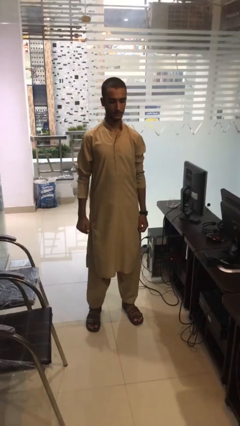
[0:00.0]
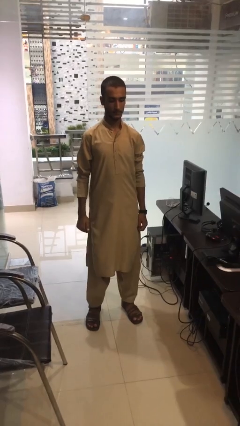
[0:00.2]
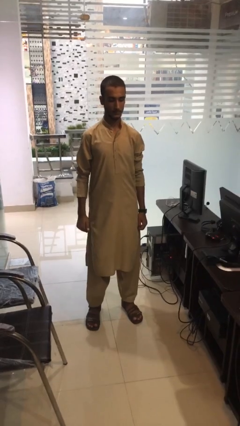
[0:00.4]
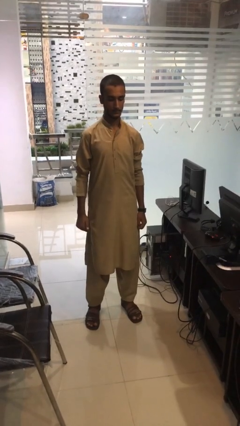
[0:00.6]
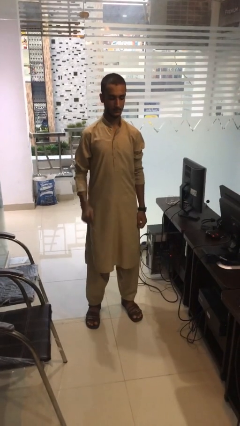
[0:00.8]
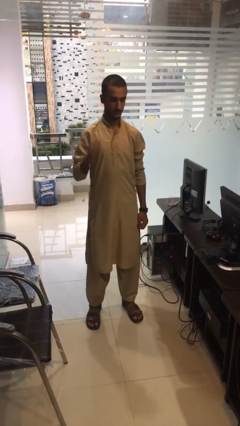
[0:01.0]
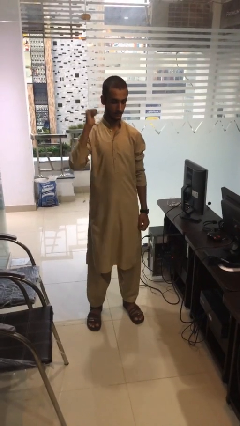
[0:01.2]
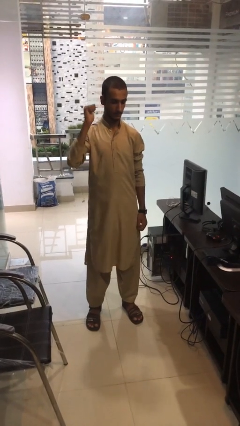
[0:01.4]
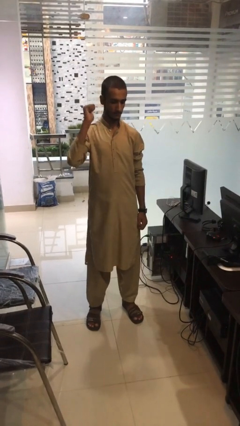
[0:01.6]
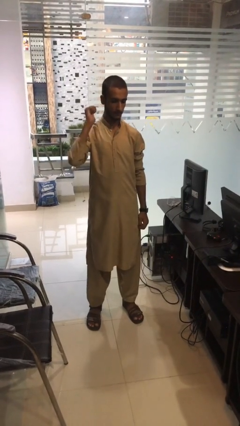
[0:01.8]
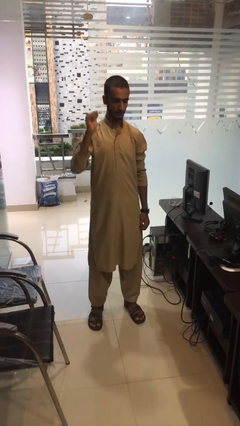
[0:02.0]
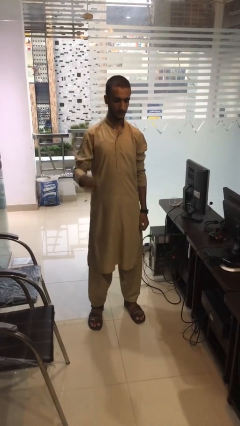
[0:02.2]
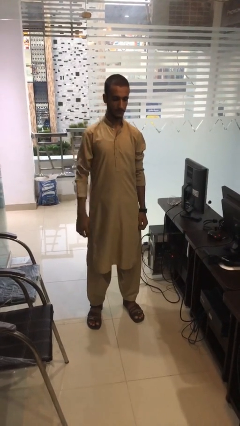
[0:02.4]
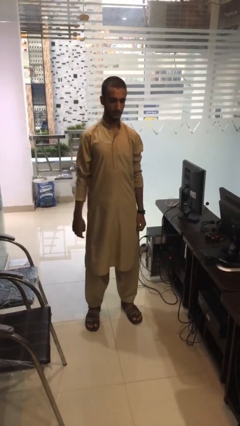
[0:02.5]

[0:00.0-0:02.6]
person gestures behind me

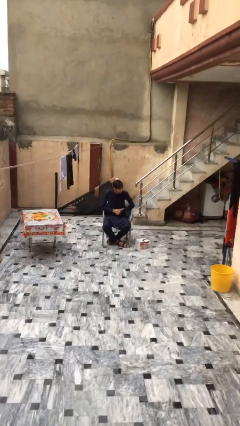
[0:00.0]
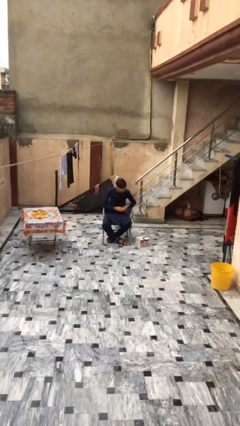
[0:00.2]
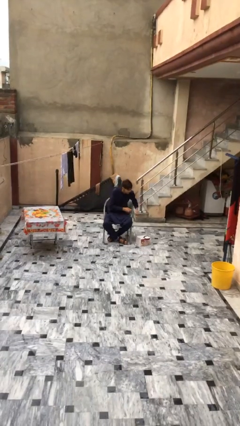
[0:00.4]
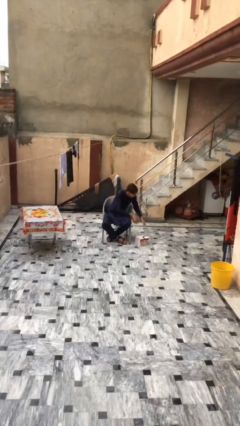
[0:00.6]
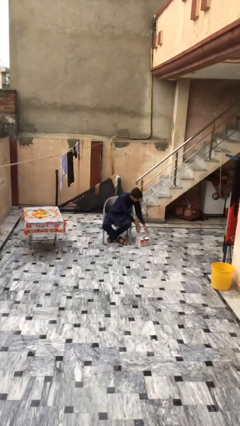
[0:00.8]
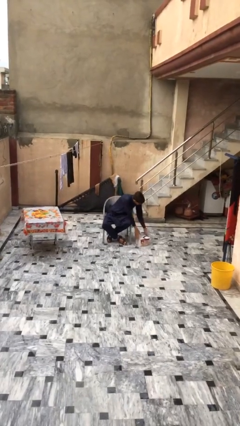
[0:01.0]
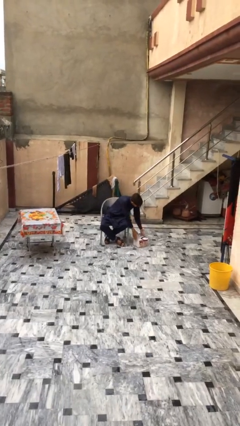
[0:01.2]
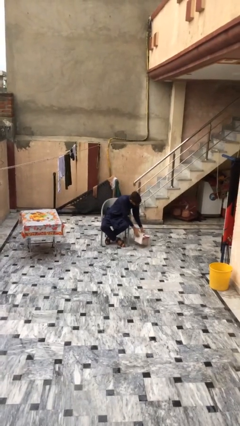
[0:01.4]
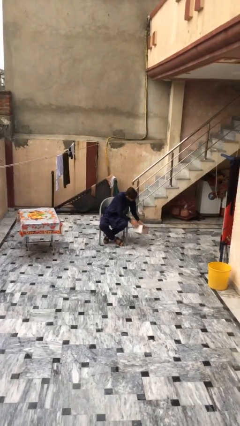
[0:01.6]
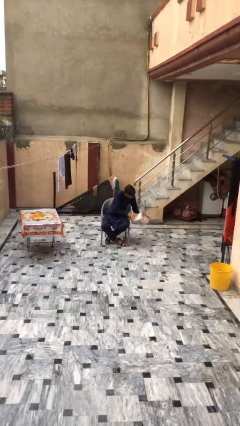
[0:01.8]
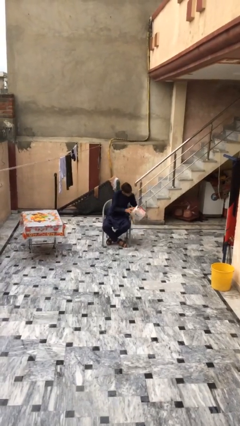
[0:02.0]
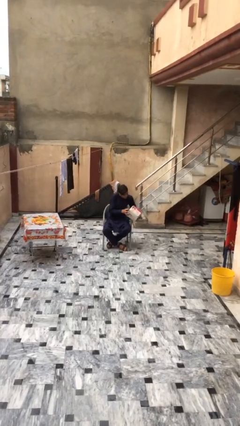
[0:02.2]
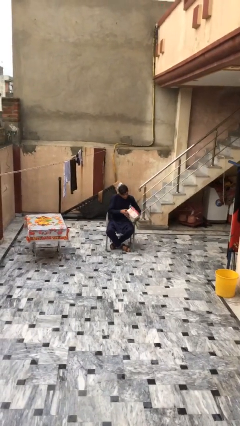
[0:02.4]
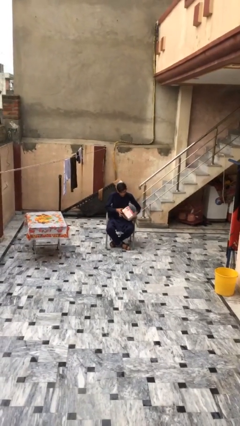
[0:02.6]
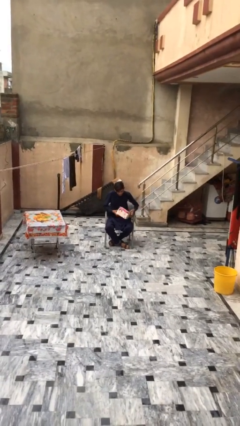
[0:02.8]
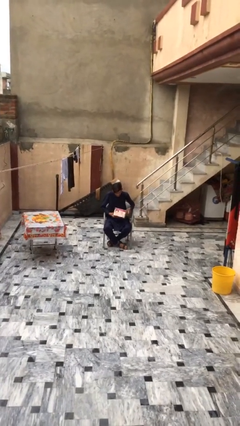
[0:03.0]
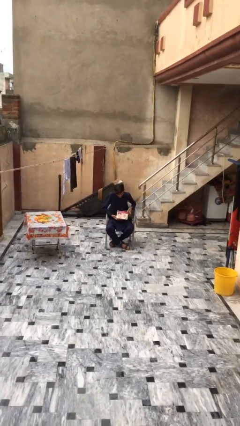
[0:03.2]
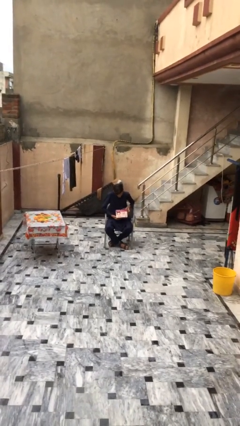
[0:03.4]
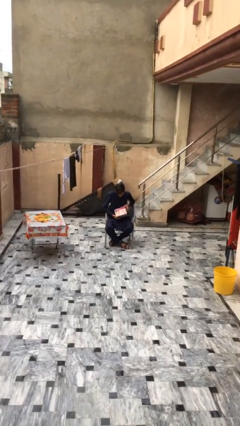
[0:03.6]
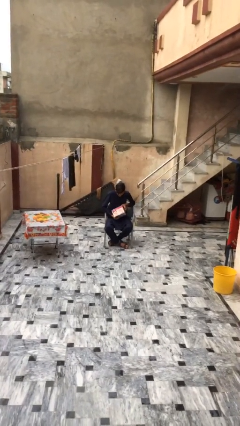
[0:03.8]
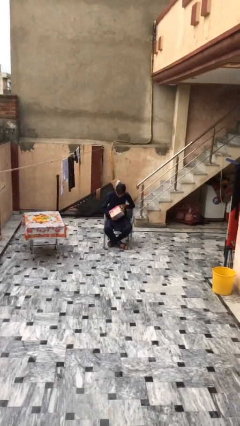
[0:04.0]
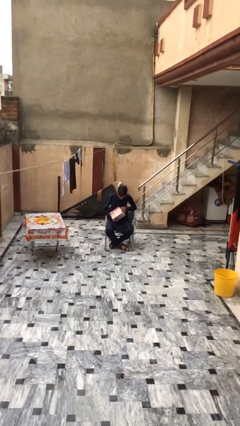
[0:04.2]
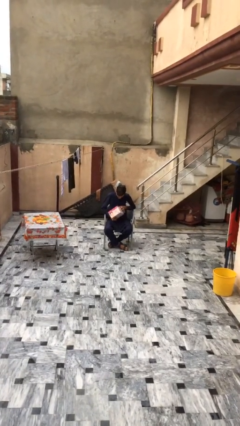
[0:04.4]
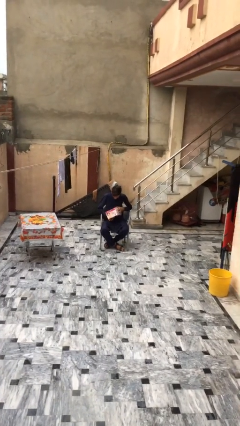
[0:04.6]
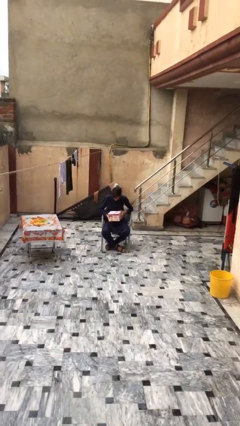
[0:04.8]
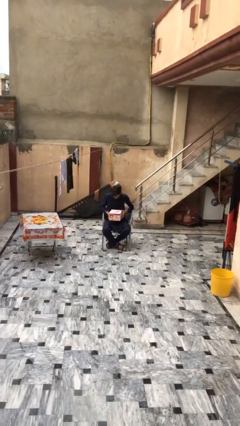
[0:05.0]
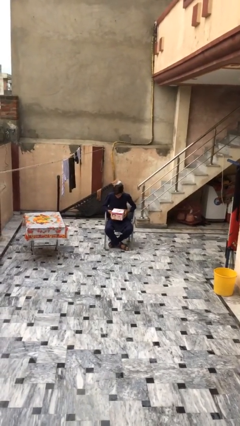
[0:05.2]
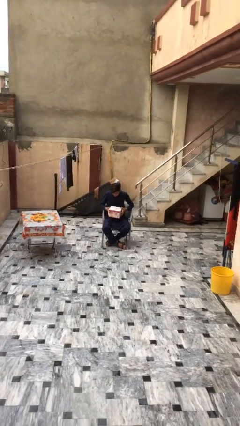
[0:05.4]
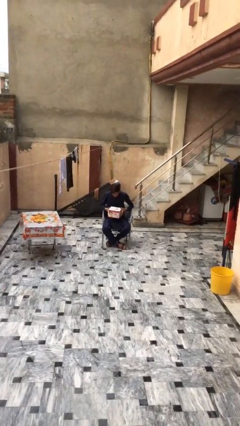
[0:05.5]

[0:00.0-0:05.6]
person picks up object from floor

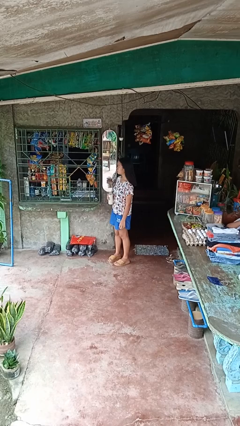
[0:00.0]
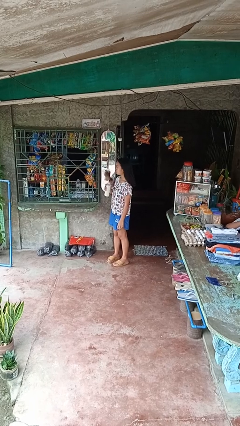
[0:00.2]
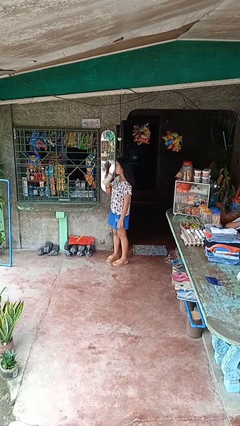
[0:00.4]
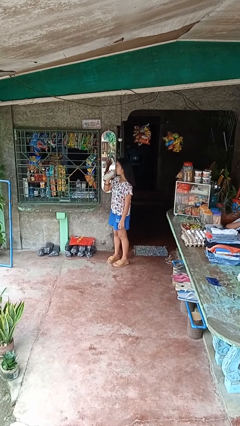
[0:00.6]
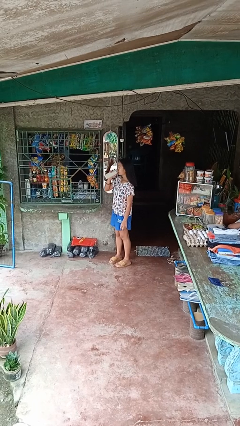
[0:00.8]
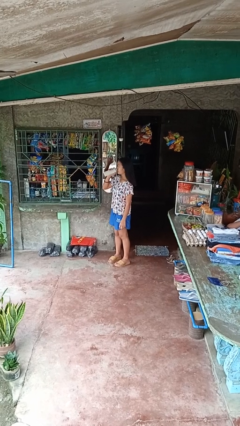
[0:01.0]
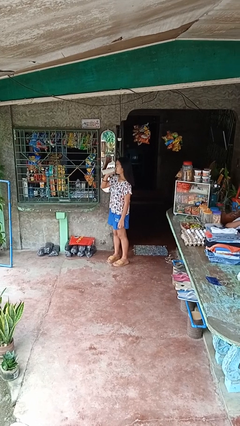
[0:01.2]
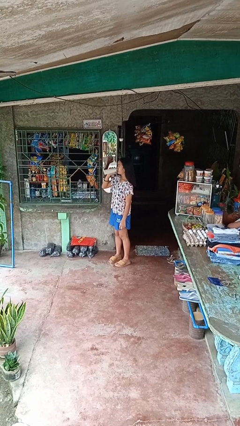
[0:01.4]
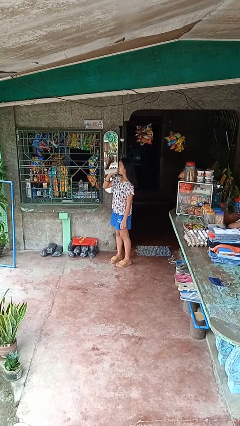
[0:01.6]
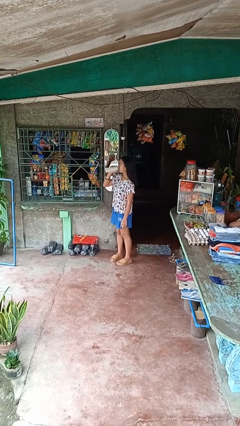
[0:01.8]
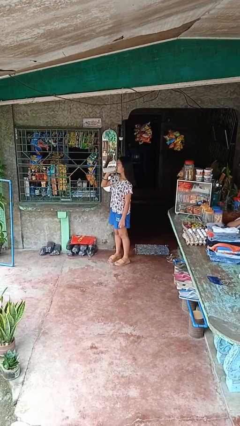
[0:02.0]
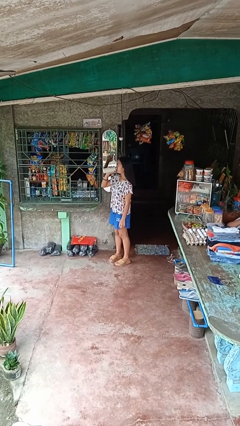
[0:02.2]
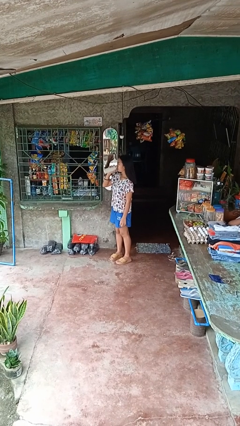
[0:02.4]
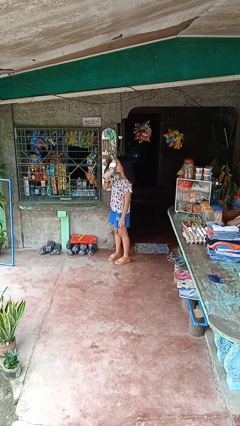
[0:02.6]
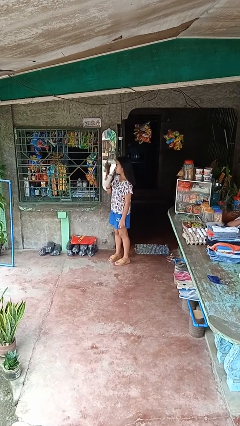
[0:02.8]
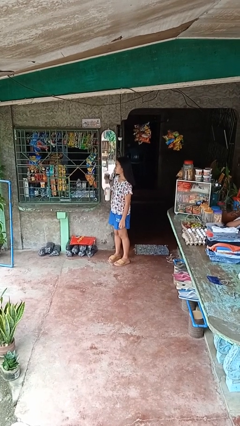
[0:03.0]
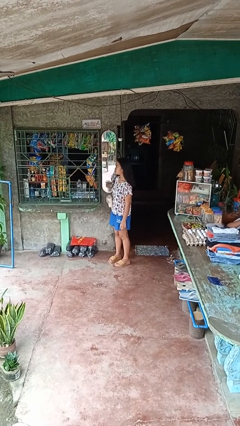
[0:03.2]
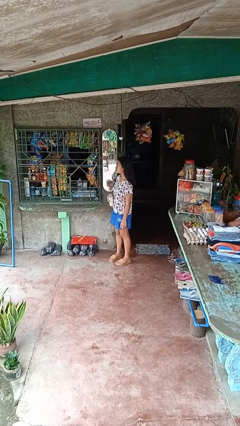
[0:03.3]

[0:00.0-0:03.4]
person drinks from bottle

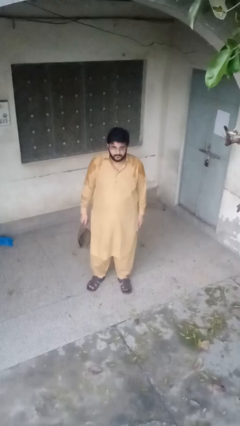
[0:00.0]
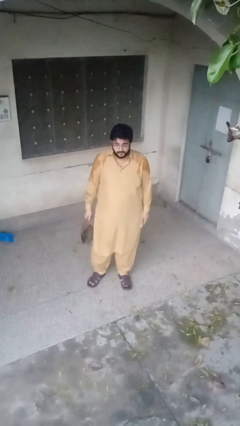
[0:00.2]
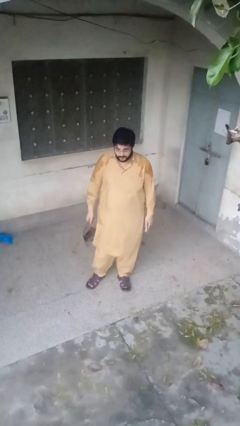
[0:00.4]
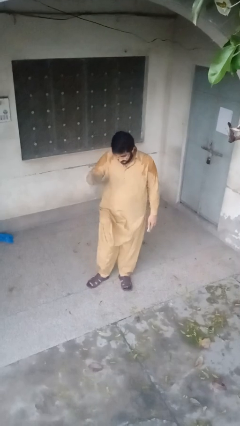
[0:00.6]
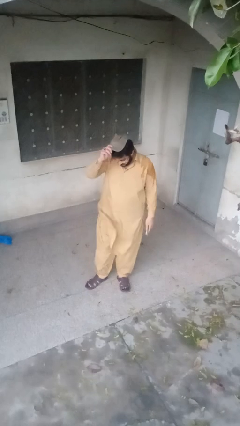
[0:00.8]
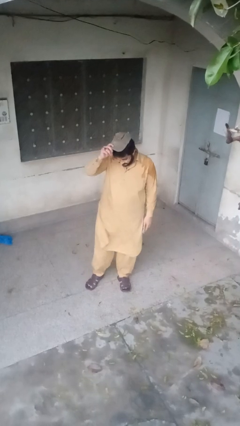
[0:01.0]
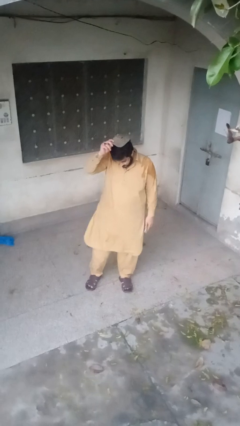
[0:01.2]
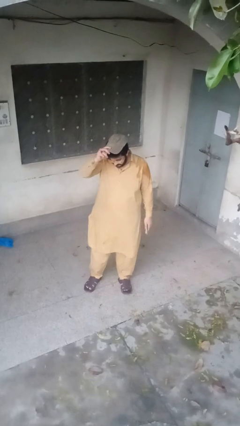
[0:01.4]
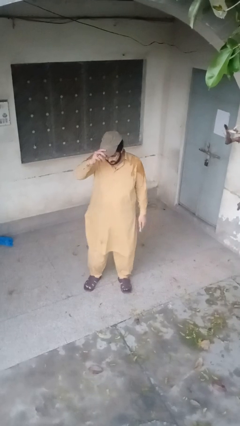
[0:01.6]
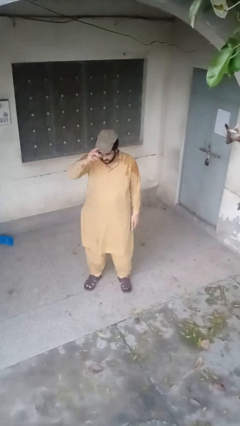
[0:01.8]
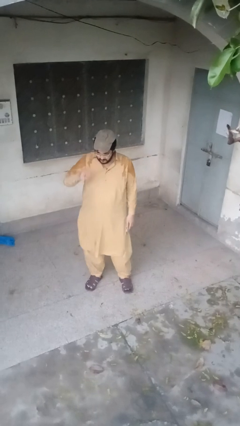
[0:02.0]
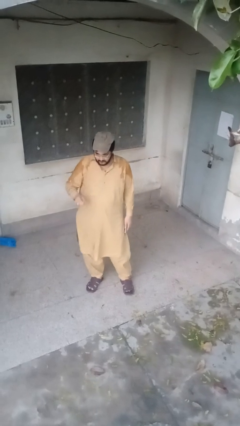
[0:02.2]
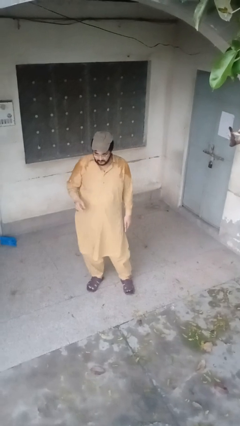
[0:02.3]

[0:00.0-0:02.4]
person puts on hat

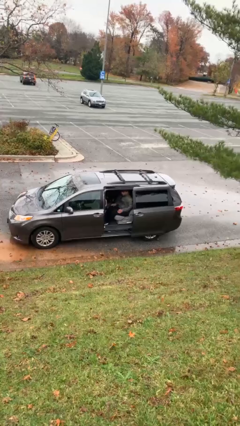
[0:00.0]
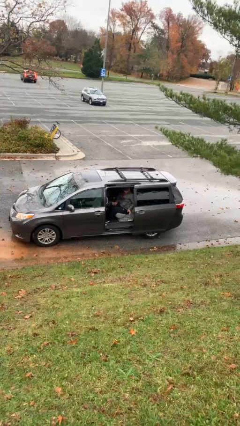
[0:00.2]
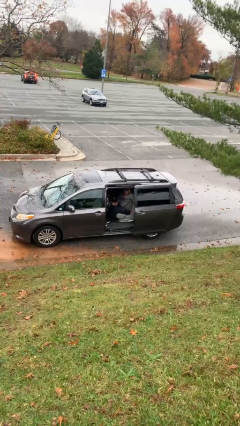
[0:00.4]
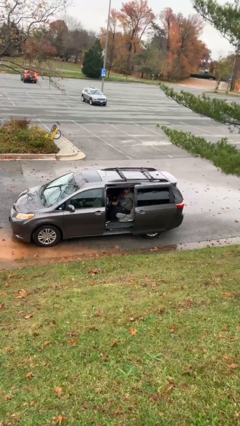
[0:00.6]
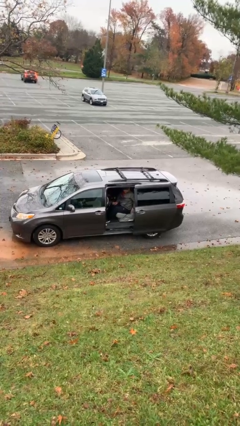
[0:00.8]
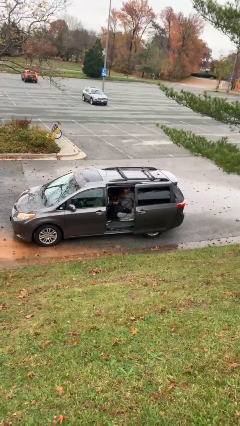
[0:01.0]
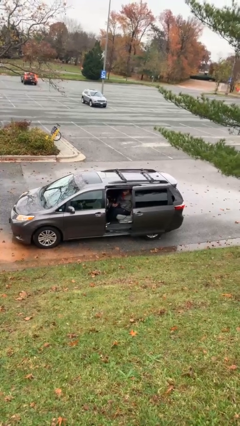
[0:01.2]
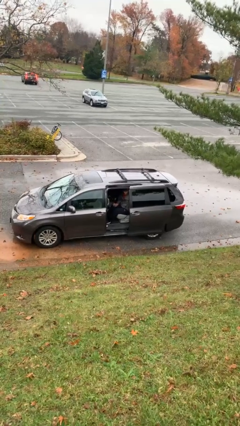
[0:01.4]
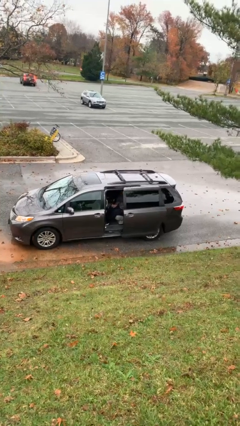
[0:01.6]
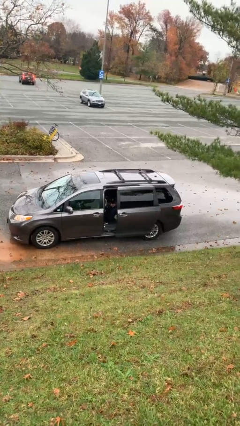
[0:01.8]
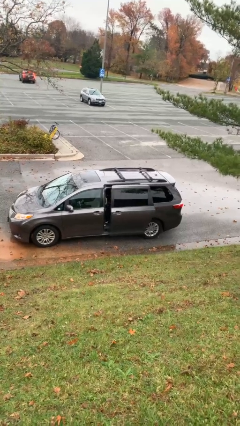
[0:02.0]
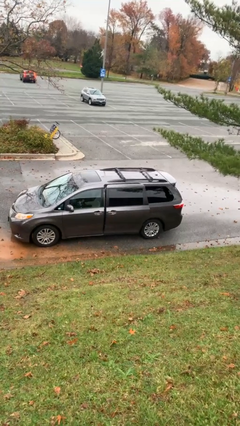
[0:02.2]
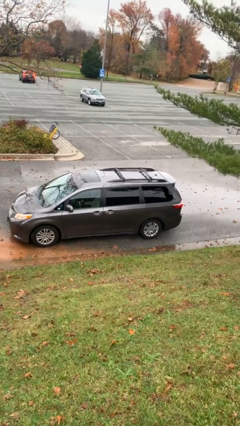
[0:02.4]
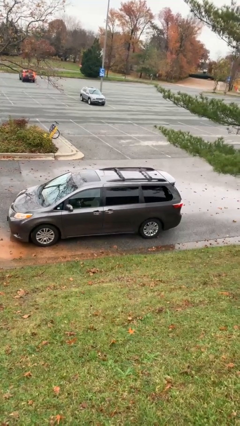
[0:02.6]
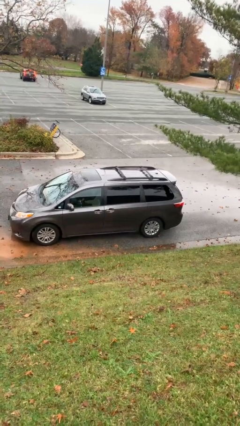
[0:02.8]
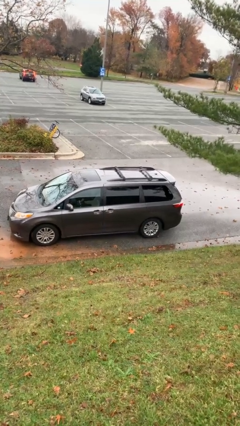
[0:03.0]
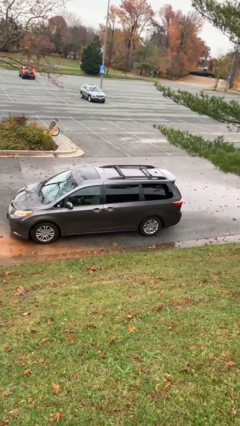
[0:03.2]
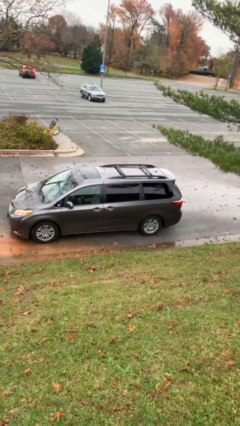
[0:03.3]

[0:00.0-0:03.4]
person closes car door

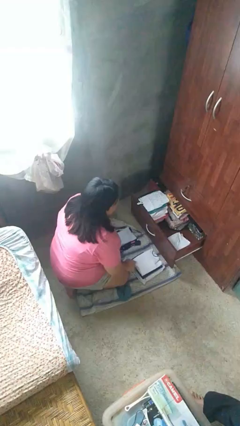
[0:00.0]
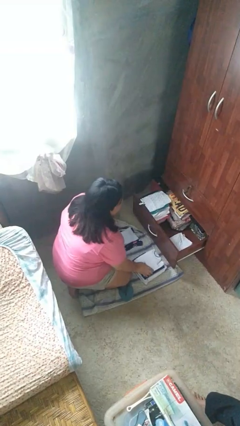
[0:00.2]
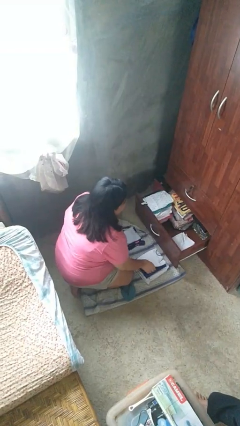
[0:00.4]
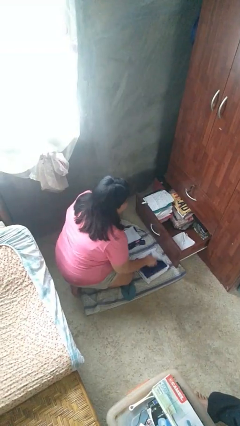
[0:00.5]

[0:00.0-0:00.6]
person puts clothes into dresser
